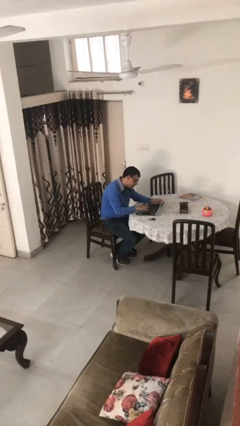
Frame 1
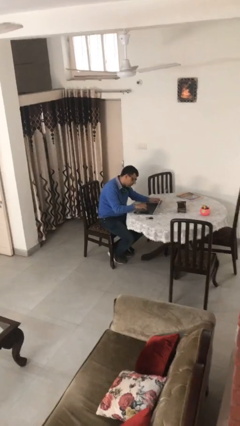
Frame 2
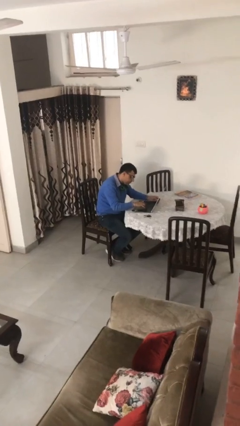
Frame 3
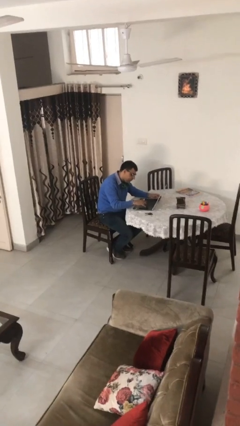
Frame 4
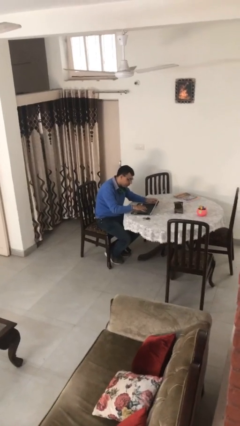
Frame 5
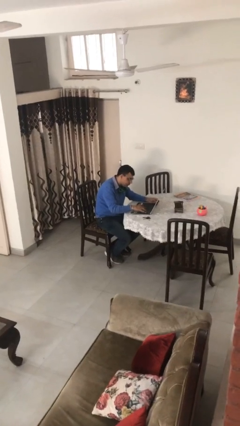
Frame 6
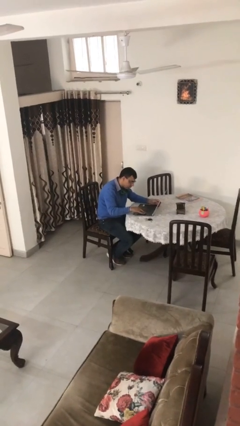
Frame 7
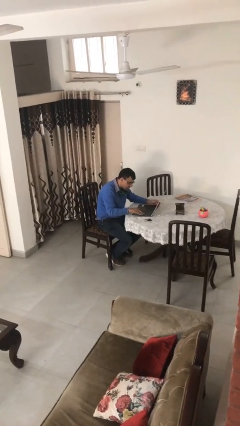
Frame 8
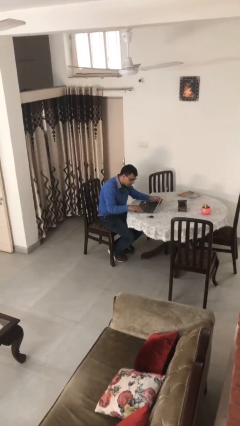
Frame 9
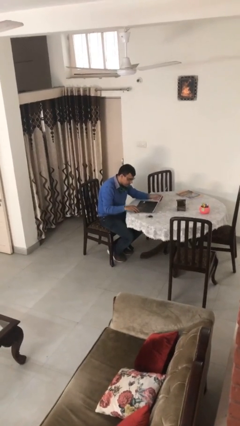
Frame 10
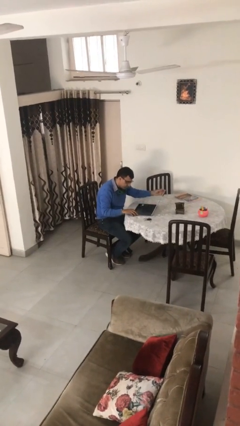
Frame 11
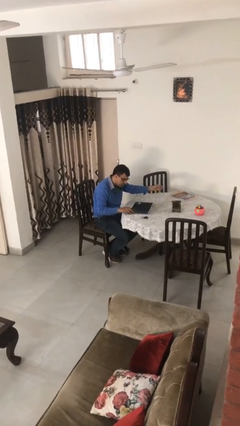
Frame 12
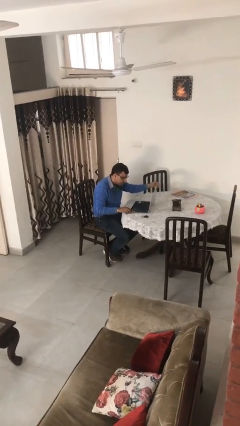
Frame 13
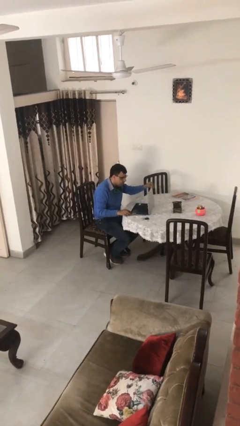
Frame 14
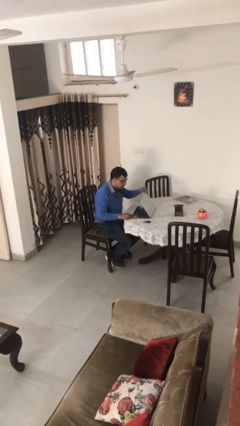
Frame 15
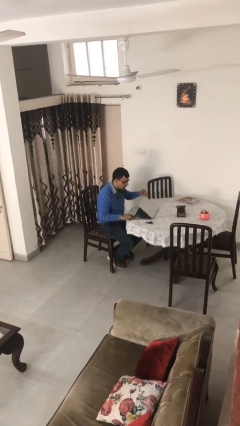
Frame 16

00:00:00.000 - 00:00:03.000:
person interacts with laptop

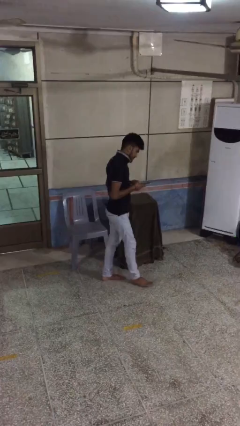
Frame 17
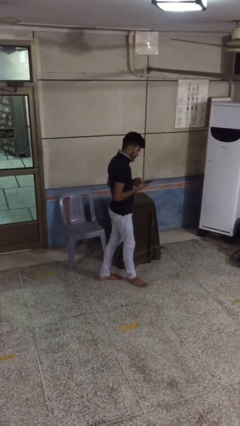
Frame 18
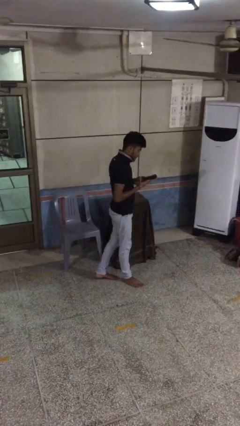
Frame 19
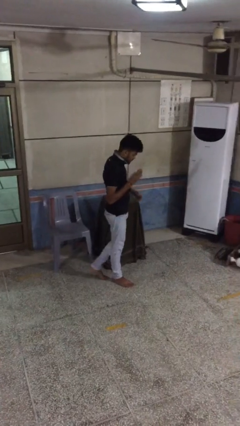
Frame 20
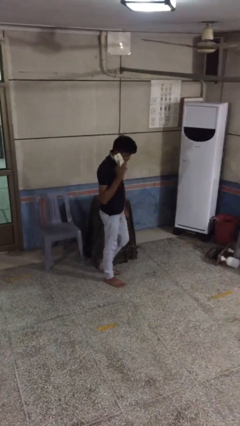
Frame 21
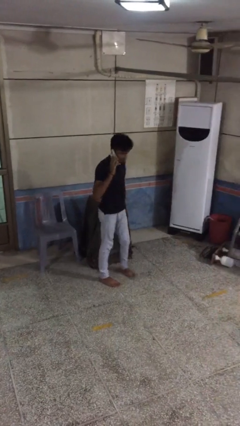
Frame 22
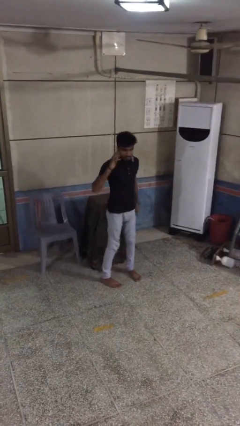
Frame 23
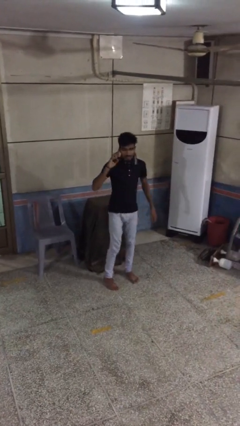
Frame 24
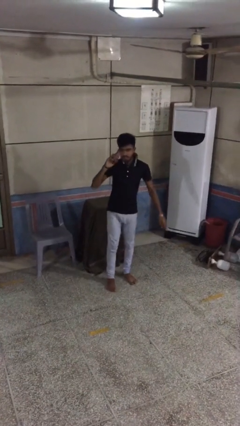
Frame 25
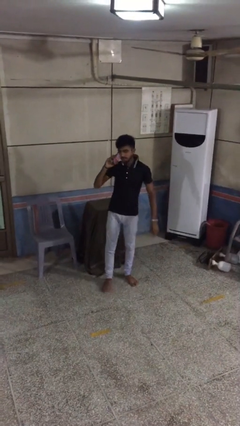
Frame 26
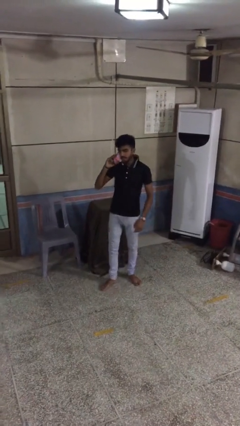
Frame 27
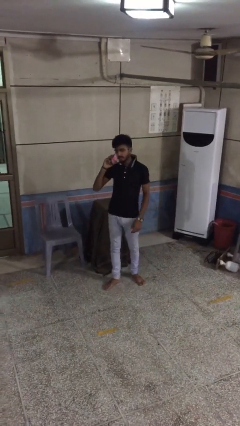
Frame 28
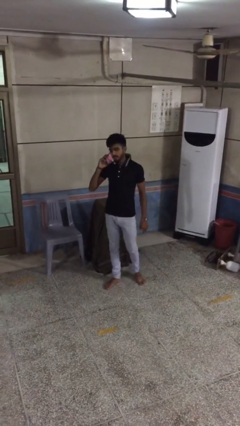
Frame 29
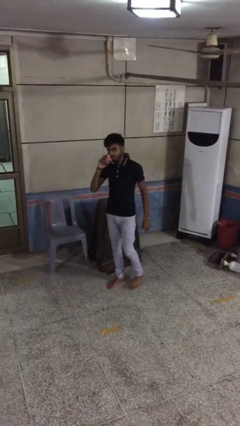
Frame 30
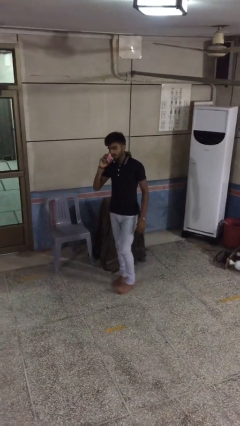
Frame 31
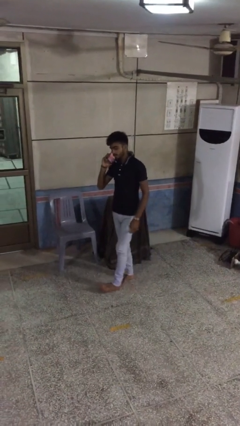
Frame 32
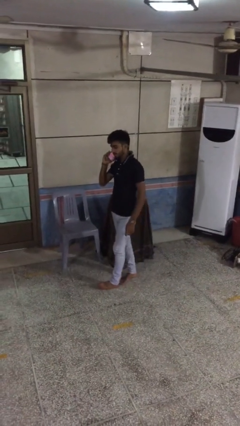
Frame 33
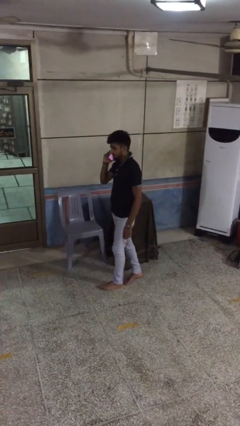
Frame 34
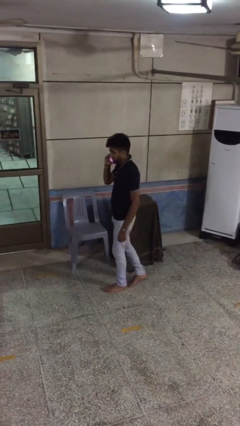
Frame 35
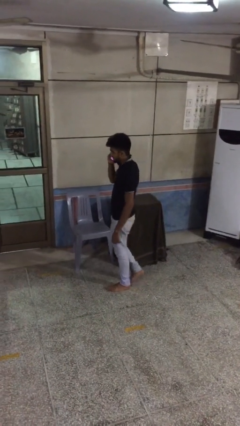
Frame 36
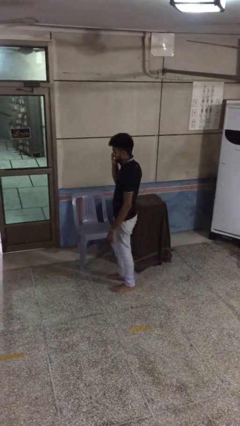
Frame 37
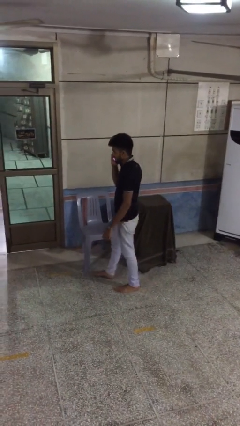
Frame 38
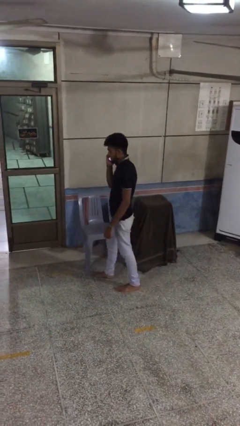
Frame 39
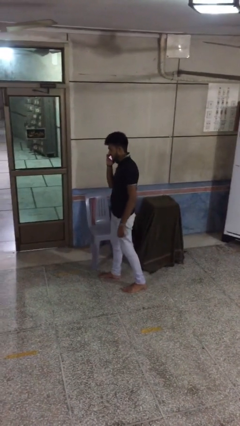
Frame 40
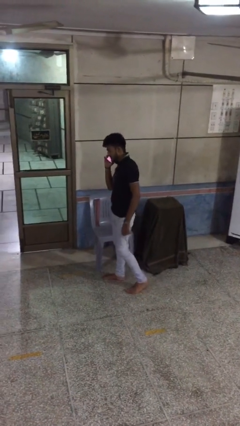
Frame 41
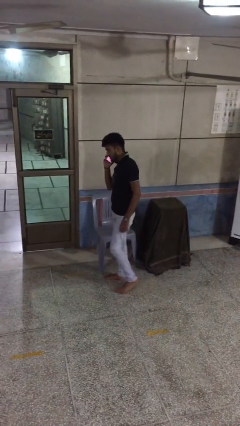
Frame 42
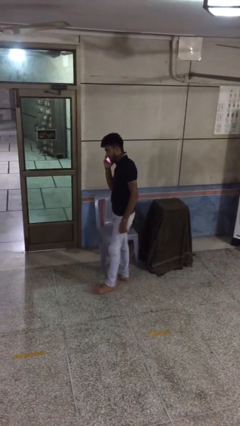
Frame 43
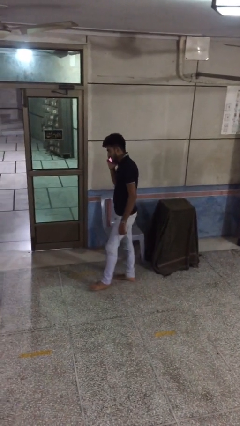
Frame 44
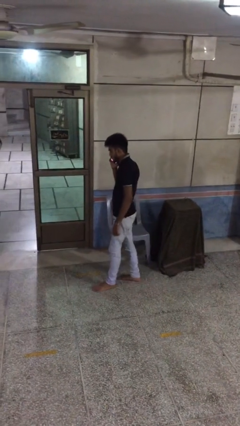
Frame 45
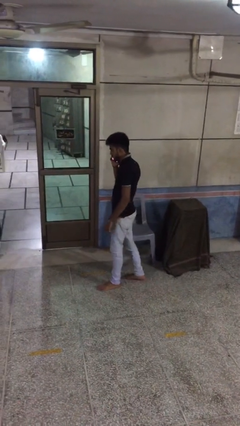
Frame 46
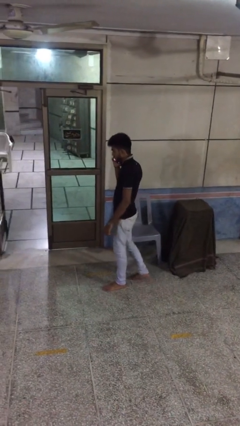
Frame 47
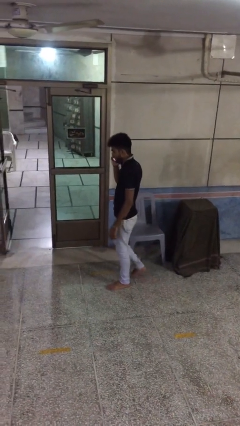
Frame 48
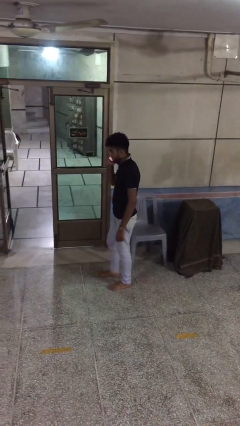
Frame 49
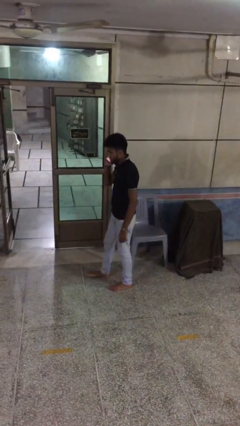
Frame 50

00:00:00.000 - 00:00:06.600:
person talks on phone

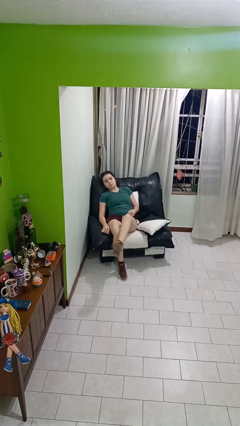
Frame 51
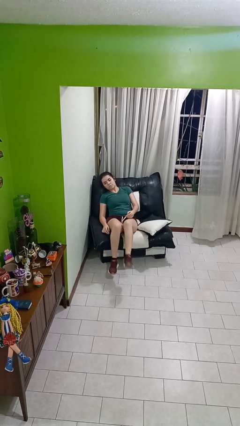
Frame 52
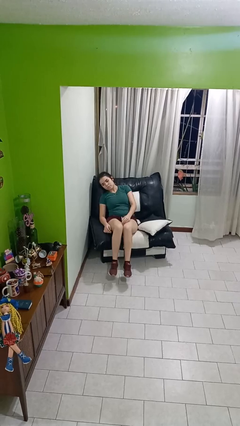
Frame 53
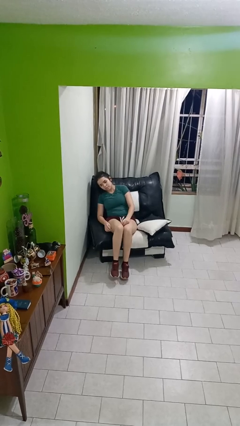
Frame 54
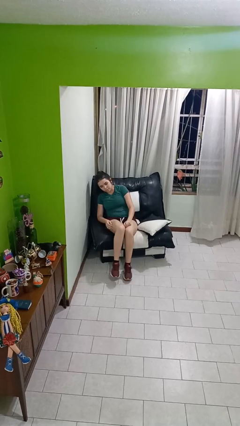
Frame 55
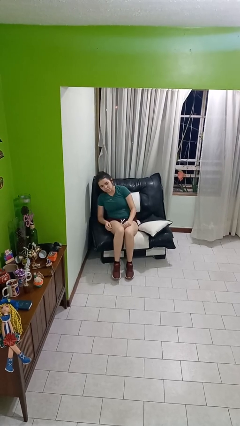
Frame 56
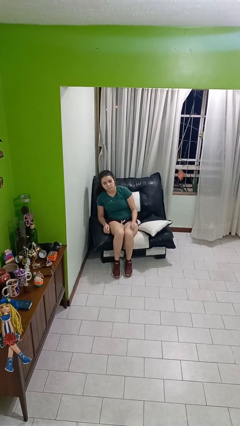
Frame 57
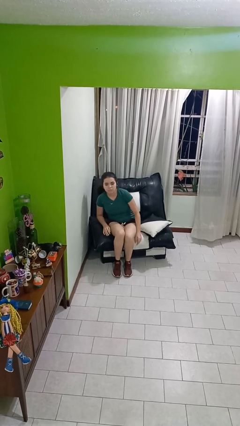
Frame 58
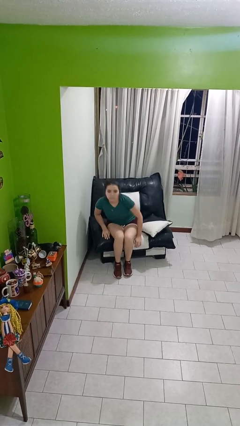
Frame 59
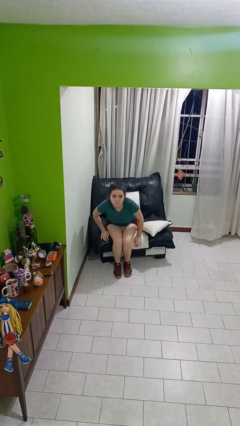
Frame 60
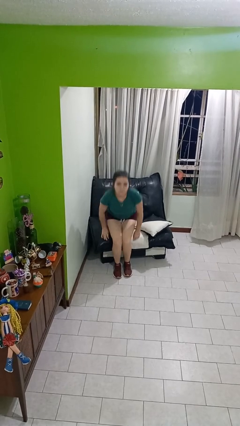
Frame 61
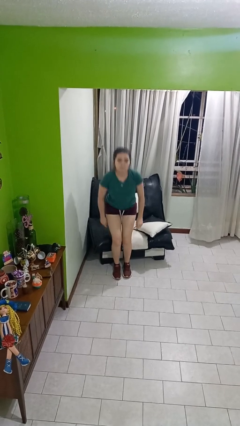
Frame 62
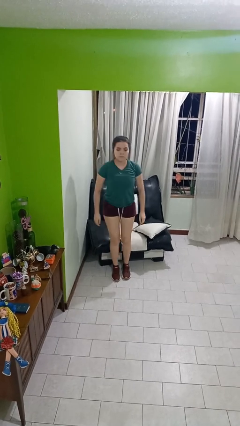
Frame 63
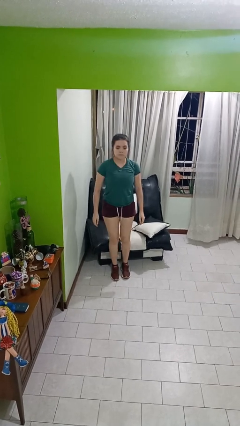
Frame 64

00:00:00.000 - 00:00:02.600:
person stands up

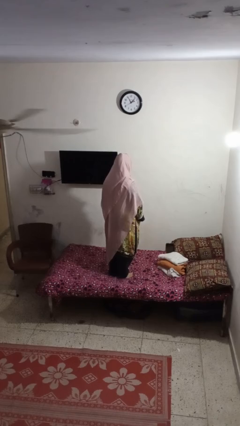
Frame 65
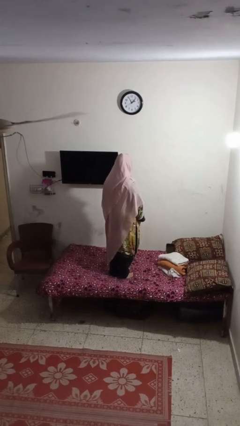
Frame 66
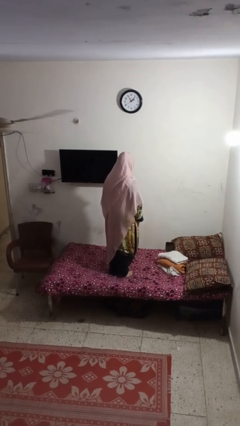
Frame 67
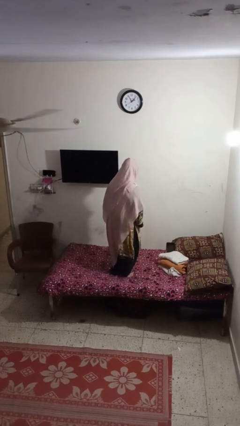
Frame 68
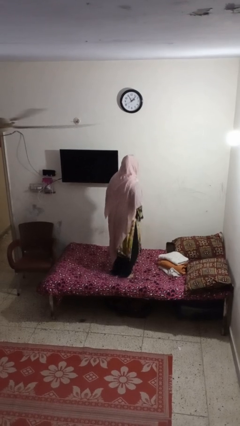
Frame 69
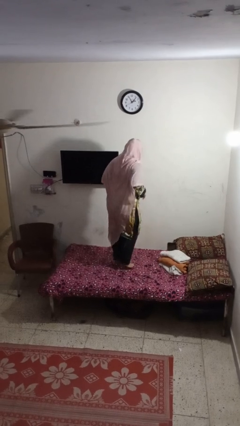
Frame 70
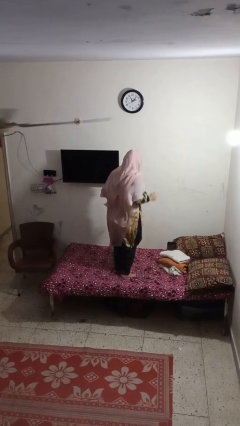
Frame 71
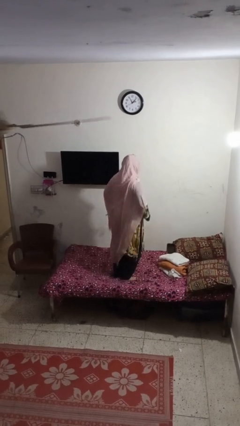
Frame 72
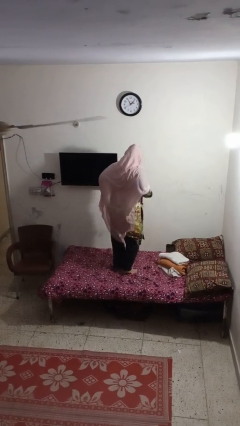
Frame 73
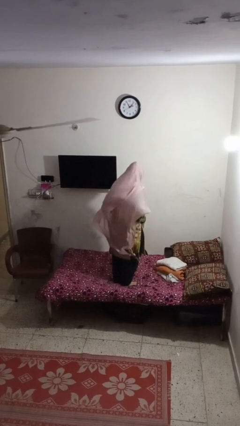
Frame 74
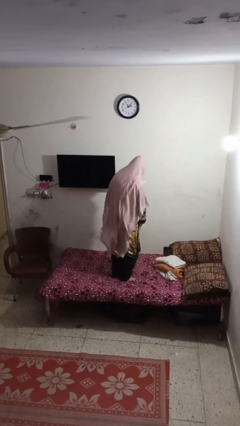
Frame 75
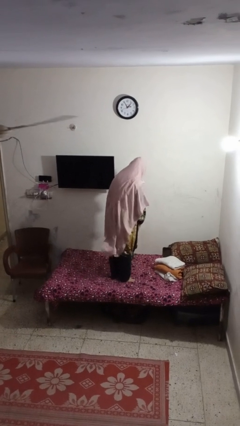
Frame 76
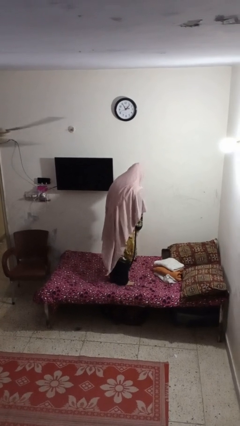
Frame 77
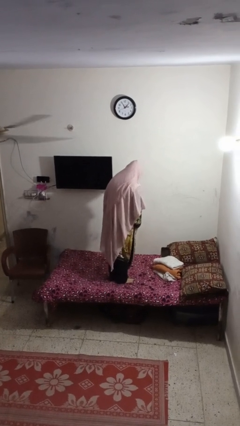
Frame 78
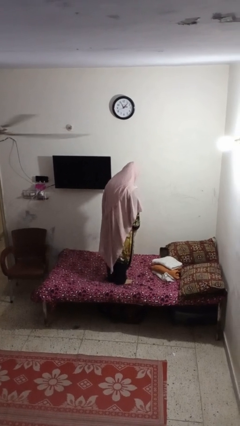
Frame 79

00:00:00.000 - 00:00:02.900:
person jumps on bed

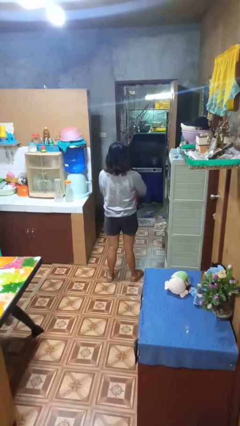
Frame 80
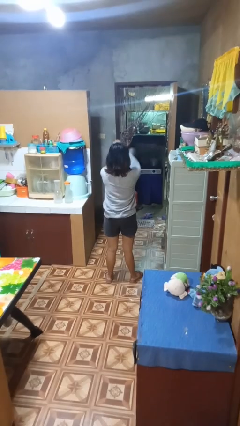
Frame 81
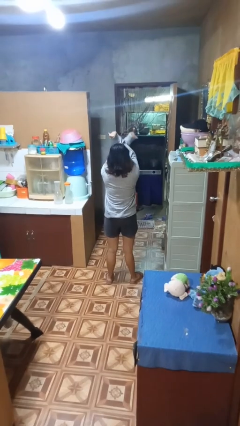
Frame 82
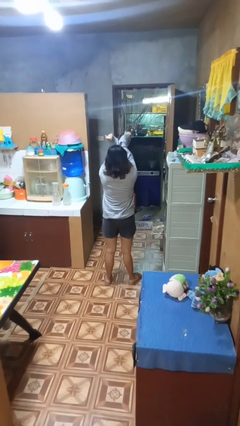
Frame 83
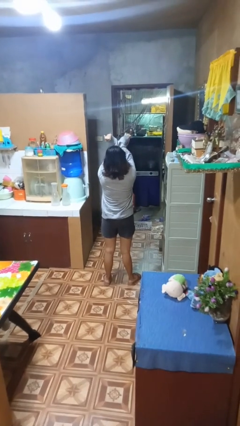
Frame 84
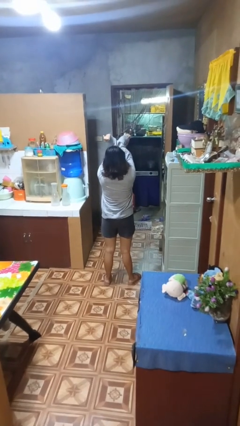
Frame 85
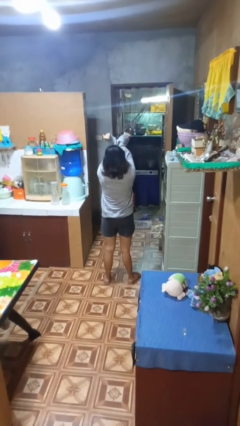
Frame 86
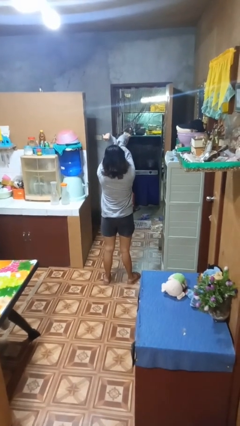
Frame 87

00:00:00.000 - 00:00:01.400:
person gestures arms x

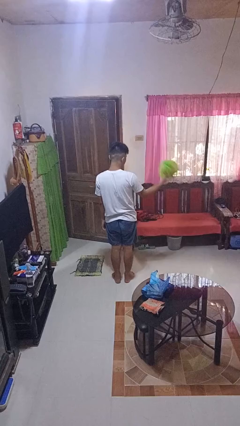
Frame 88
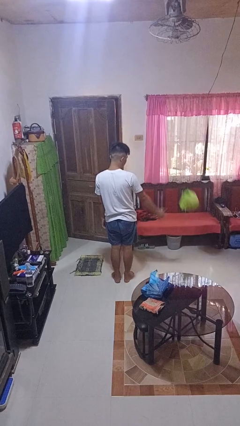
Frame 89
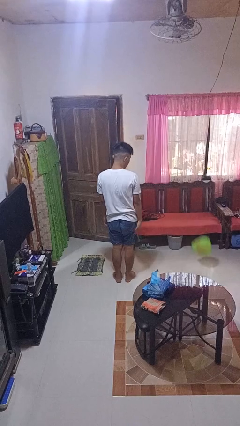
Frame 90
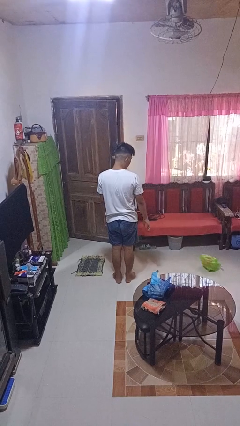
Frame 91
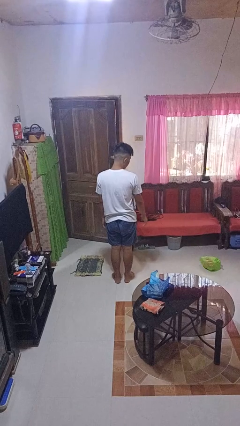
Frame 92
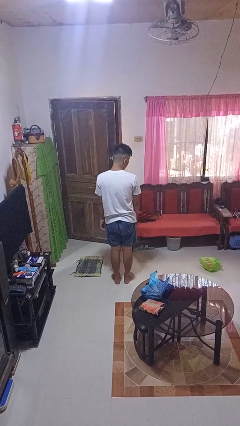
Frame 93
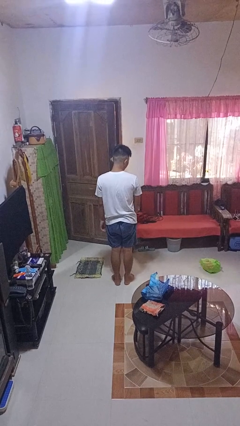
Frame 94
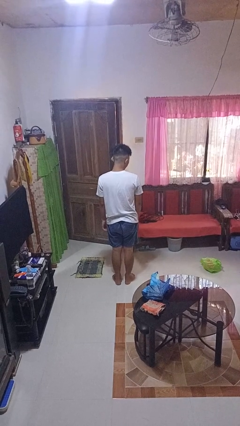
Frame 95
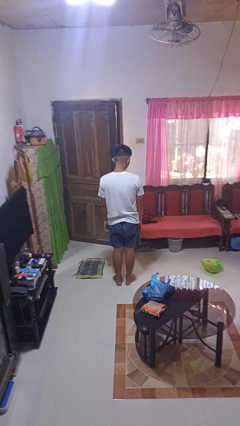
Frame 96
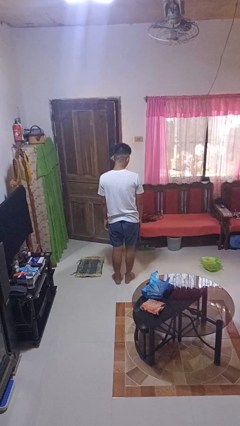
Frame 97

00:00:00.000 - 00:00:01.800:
person throws object to ground
